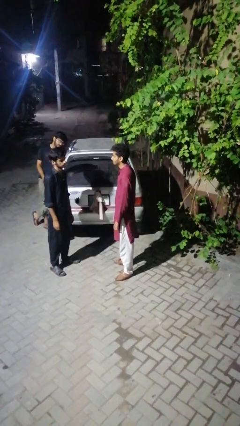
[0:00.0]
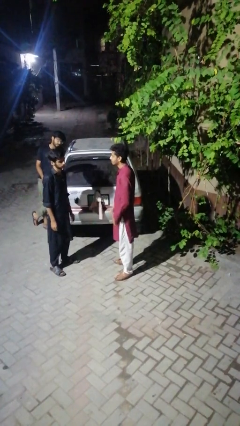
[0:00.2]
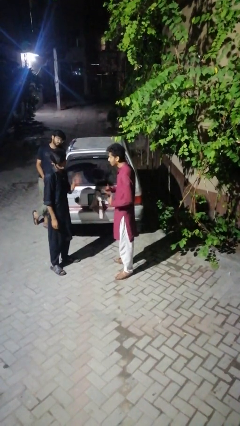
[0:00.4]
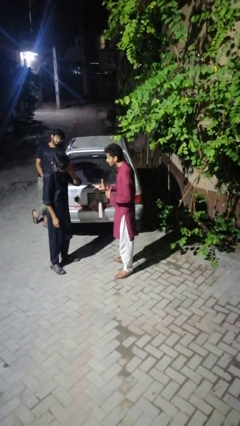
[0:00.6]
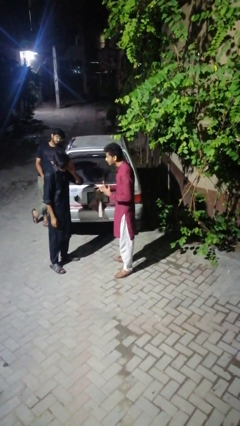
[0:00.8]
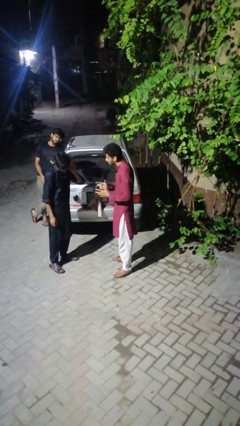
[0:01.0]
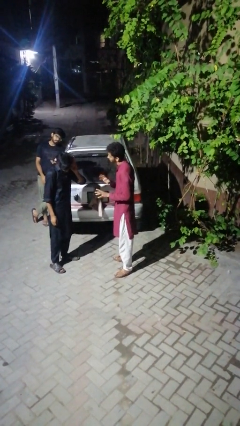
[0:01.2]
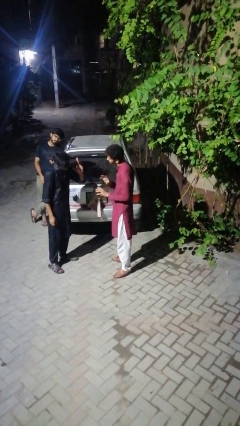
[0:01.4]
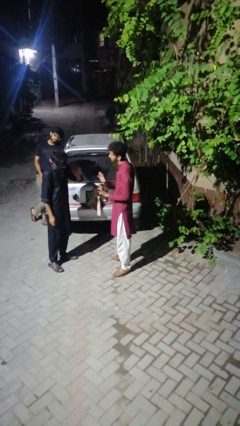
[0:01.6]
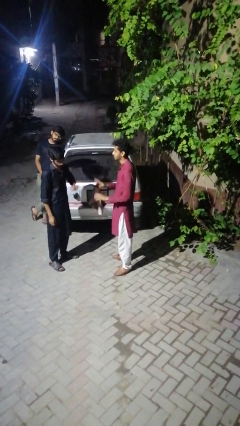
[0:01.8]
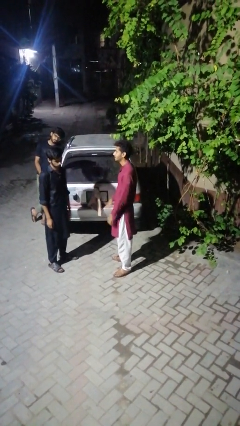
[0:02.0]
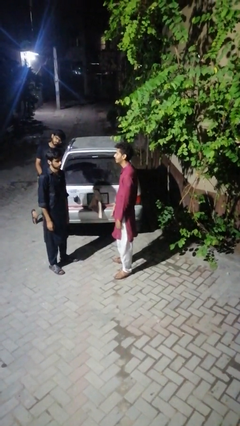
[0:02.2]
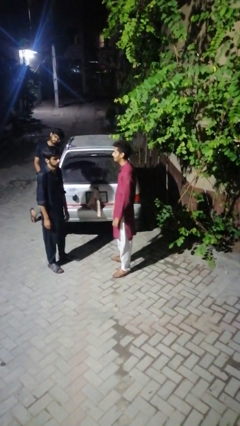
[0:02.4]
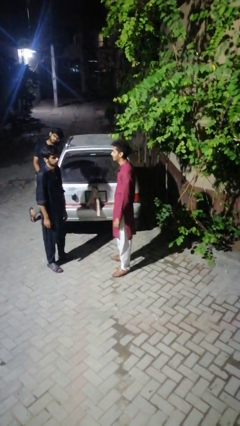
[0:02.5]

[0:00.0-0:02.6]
person talks to person

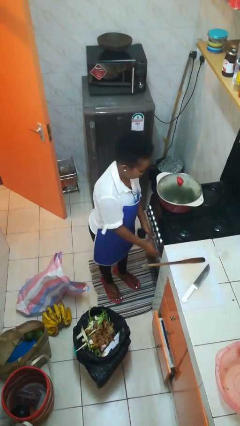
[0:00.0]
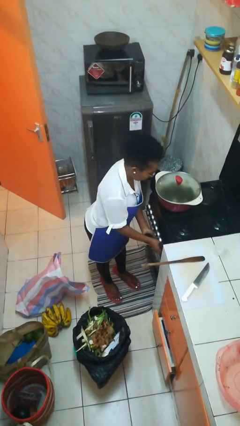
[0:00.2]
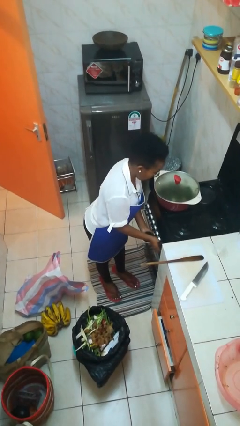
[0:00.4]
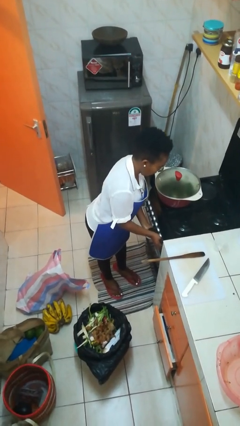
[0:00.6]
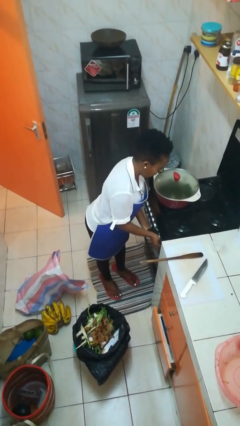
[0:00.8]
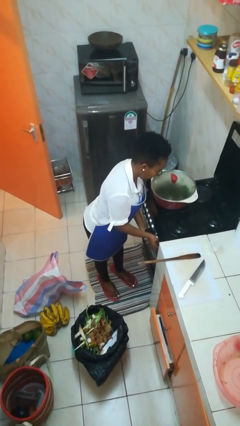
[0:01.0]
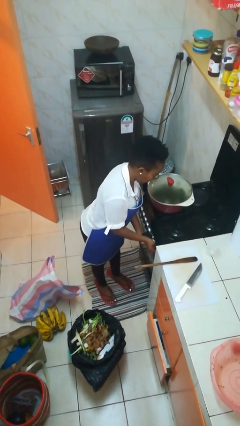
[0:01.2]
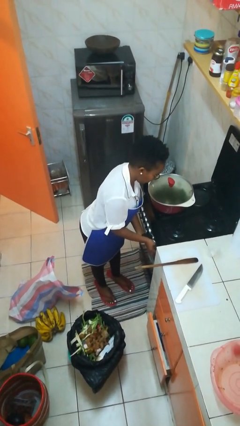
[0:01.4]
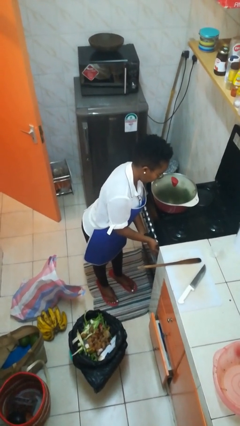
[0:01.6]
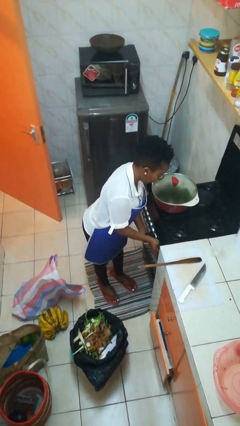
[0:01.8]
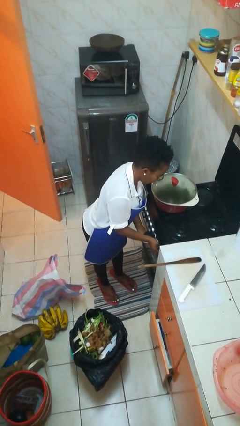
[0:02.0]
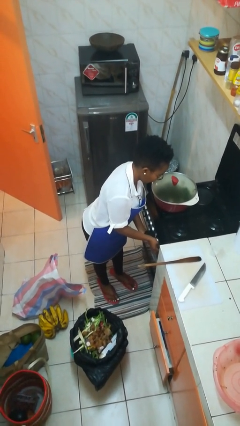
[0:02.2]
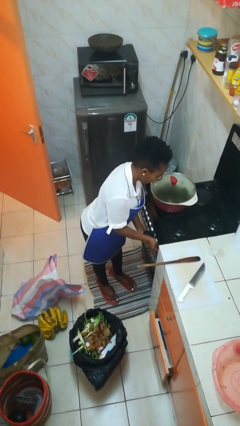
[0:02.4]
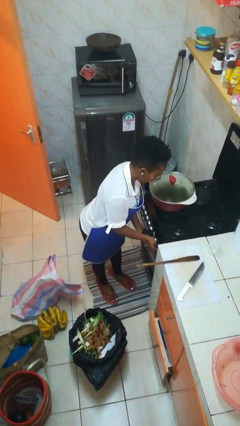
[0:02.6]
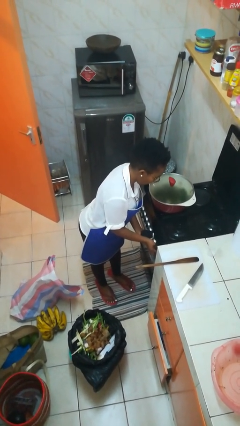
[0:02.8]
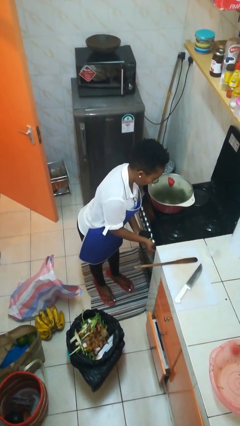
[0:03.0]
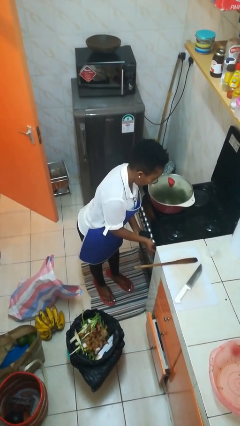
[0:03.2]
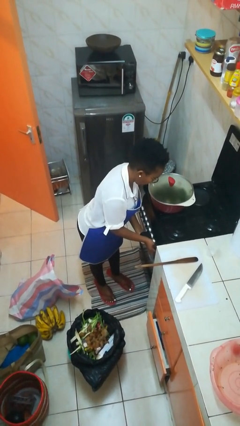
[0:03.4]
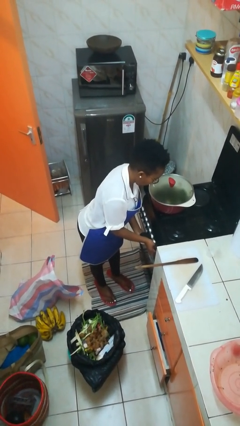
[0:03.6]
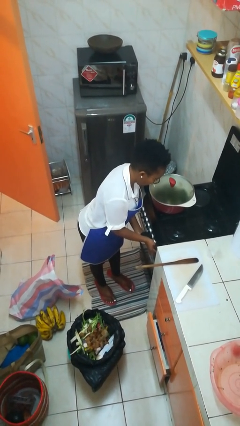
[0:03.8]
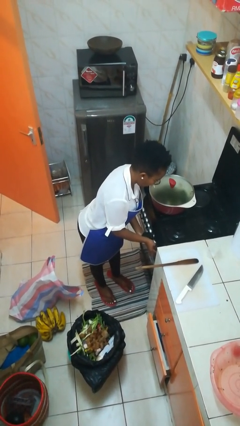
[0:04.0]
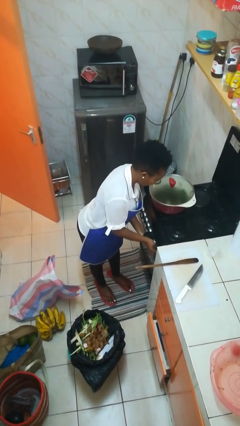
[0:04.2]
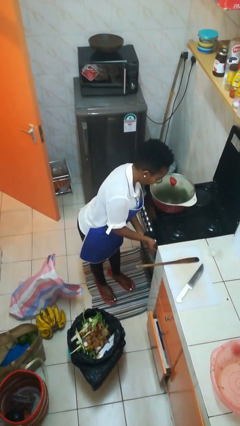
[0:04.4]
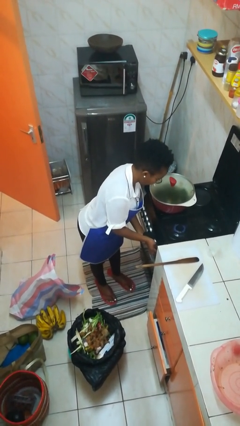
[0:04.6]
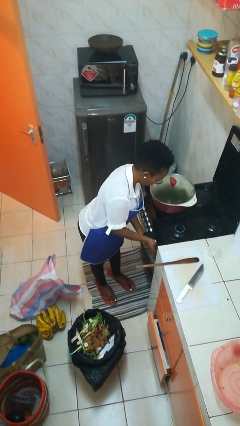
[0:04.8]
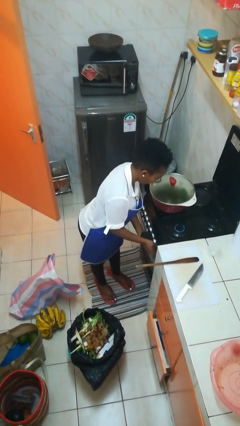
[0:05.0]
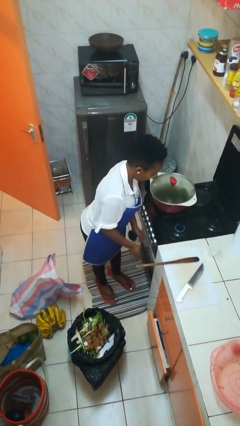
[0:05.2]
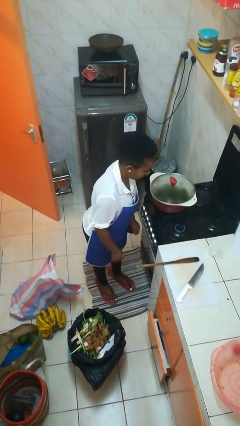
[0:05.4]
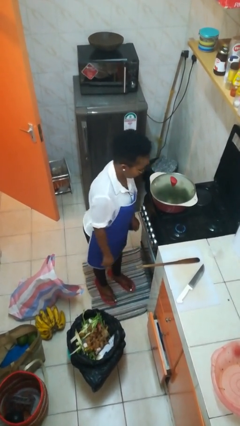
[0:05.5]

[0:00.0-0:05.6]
person turns on stovetop

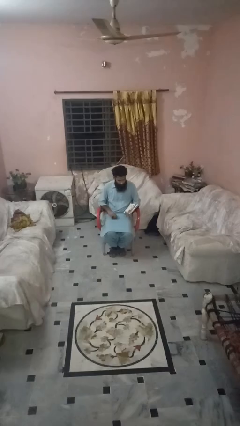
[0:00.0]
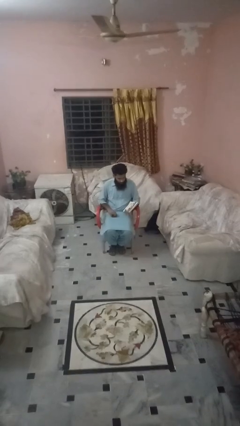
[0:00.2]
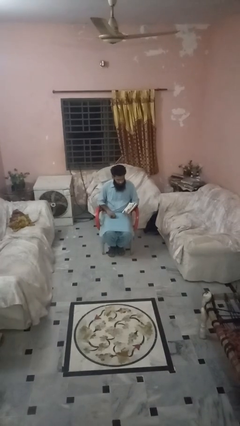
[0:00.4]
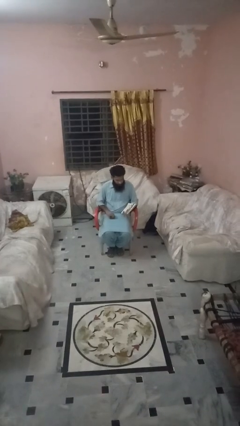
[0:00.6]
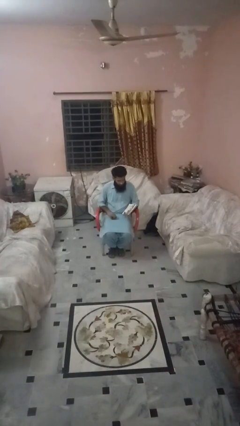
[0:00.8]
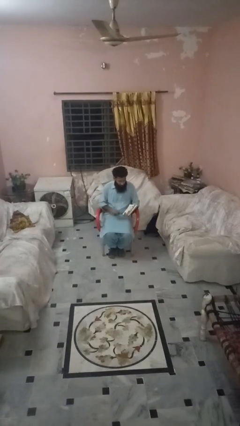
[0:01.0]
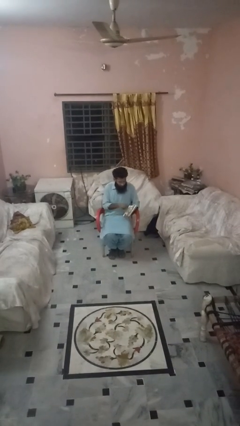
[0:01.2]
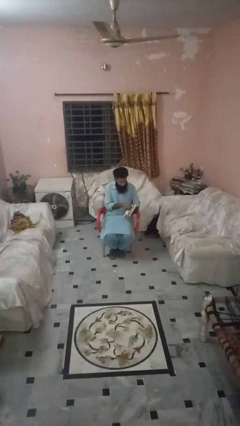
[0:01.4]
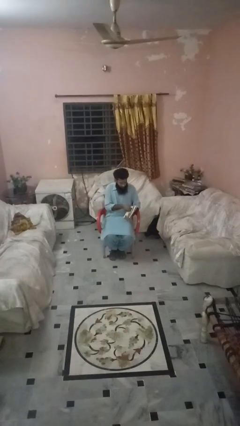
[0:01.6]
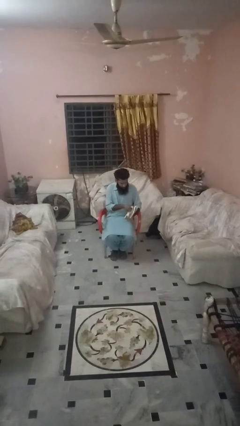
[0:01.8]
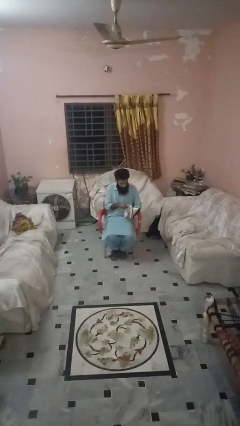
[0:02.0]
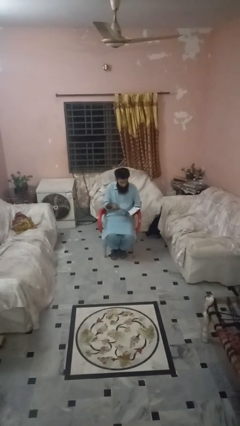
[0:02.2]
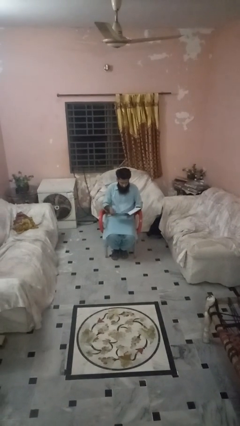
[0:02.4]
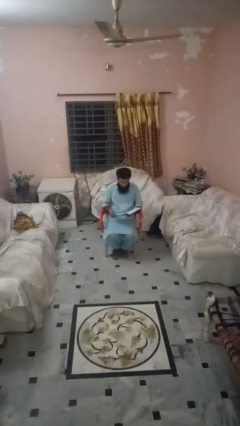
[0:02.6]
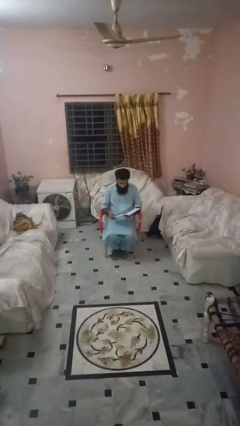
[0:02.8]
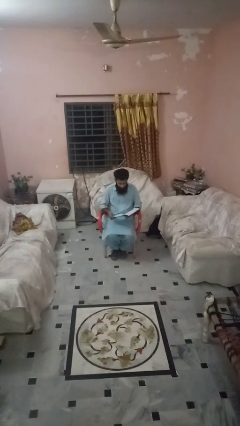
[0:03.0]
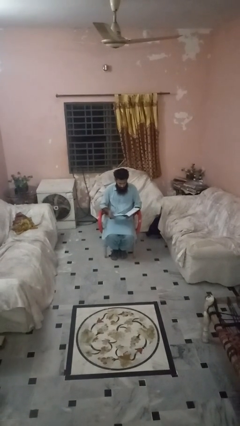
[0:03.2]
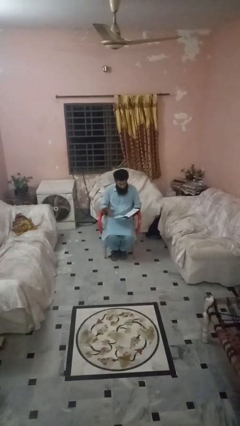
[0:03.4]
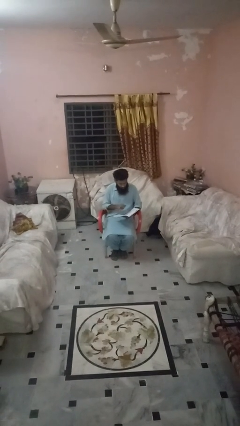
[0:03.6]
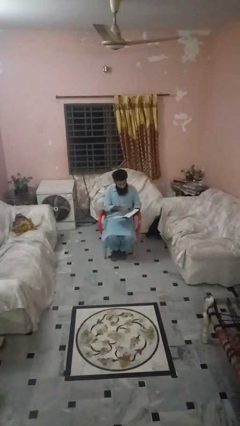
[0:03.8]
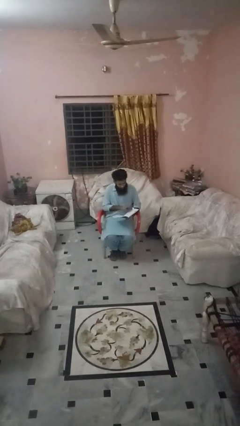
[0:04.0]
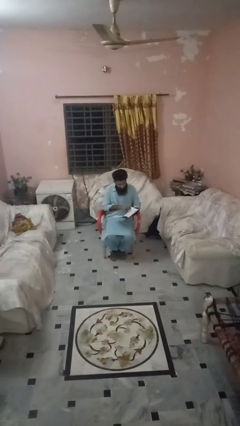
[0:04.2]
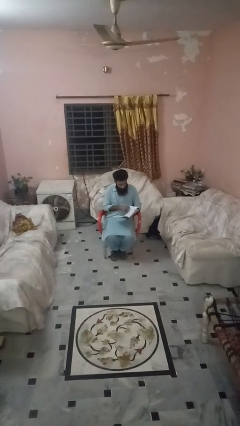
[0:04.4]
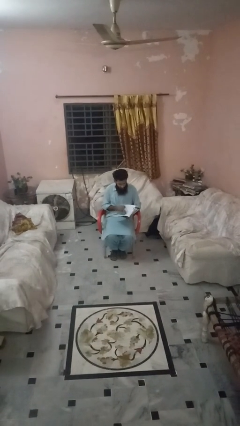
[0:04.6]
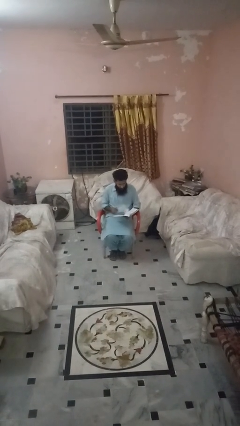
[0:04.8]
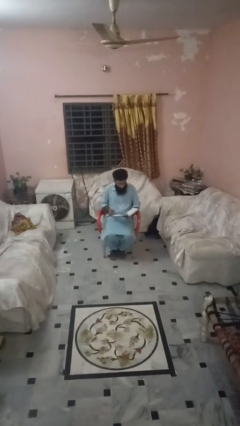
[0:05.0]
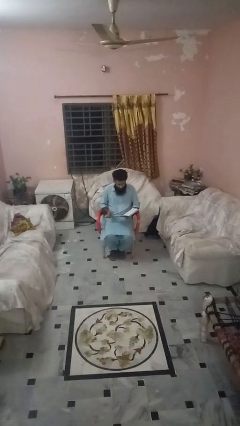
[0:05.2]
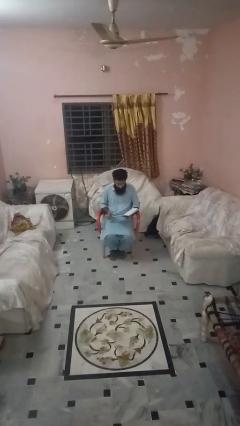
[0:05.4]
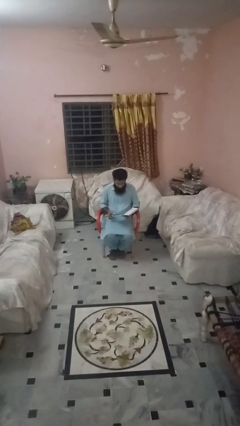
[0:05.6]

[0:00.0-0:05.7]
person reads magazine

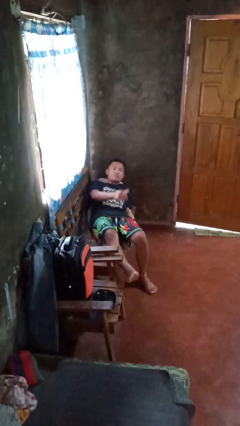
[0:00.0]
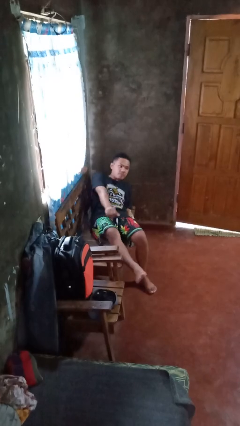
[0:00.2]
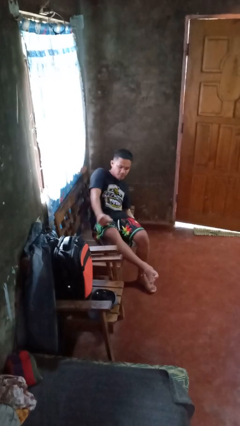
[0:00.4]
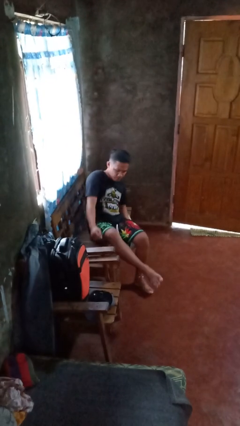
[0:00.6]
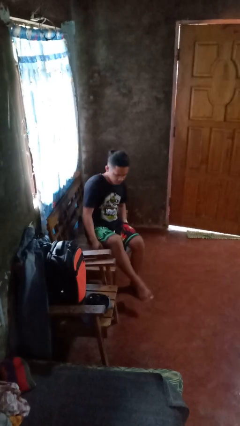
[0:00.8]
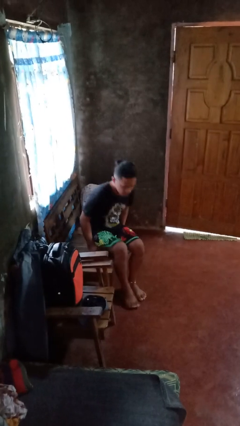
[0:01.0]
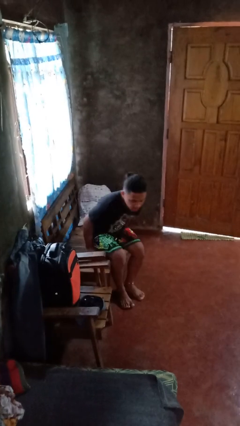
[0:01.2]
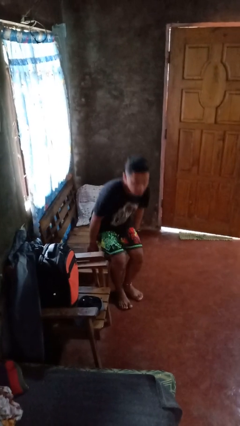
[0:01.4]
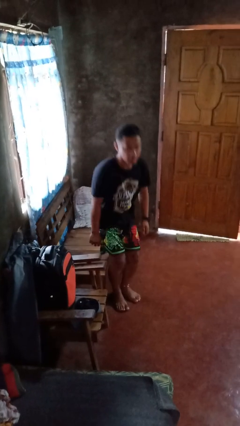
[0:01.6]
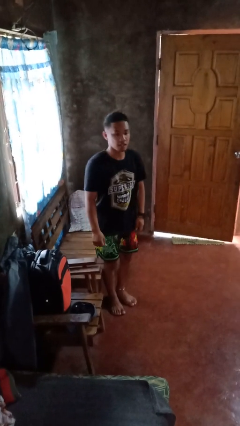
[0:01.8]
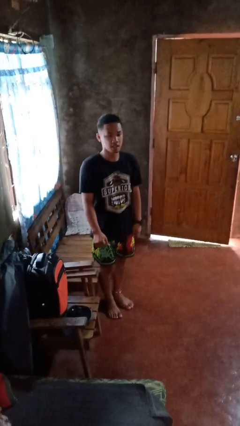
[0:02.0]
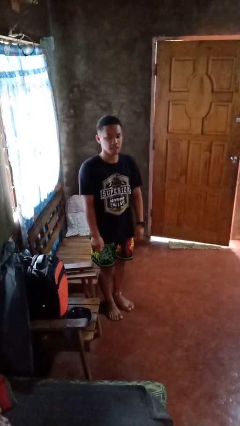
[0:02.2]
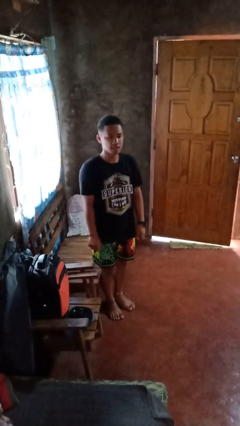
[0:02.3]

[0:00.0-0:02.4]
person stands up

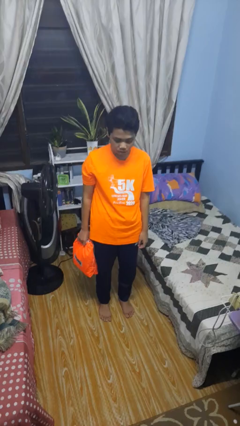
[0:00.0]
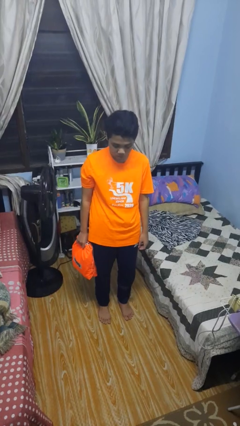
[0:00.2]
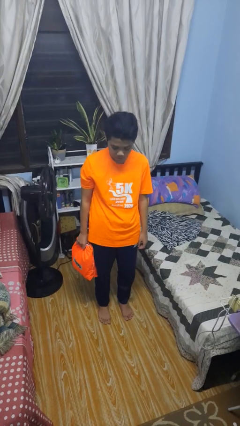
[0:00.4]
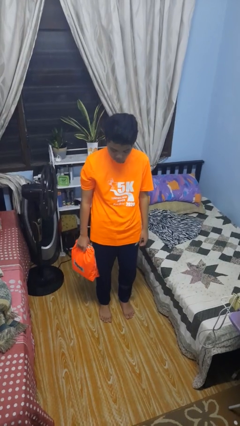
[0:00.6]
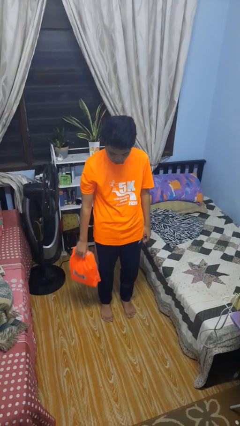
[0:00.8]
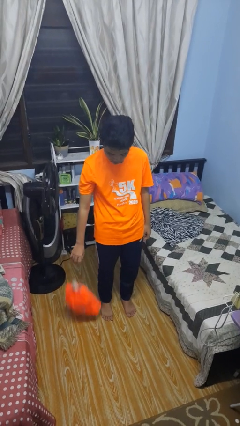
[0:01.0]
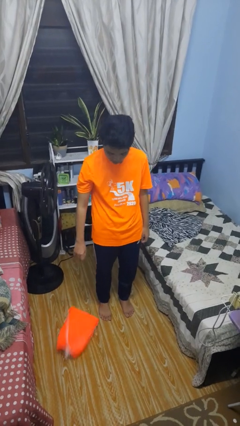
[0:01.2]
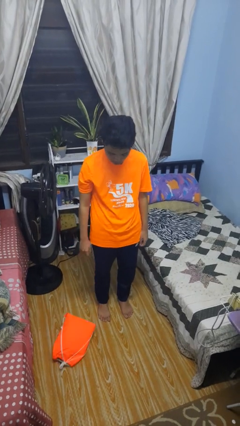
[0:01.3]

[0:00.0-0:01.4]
person drops object
